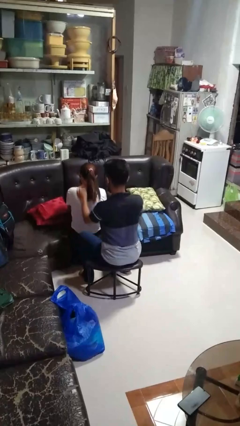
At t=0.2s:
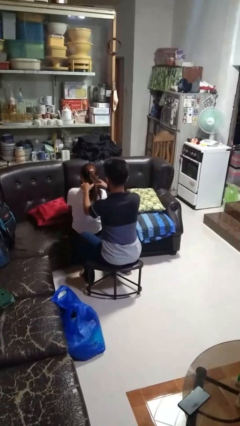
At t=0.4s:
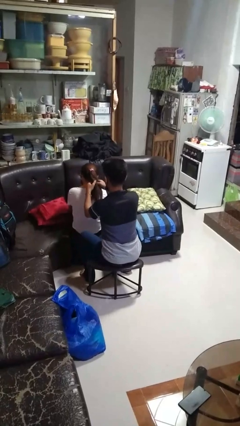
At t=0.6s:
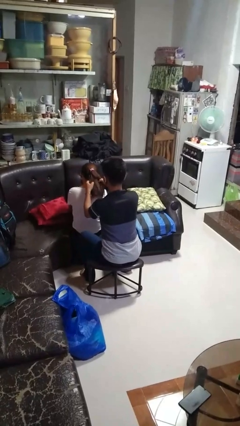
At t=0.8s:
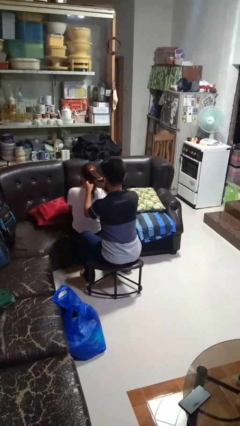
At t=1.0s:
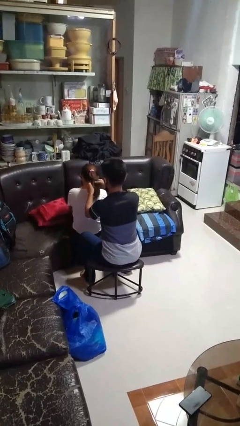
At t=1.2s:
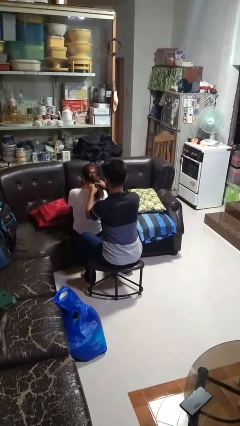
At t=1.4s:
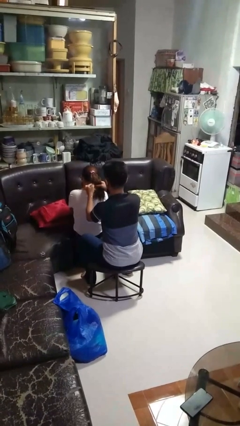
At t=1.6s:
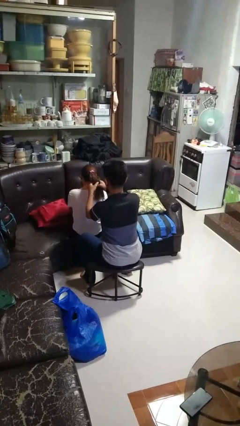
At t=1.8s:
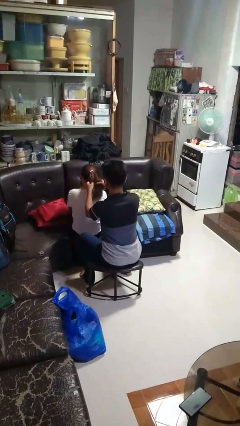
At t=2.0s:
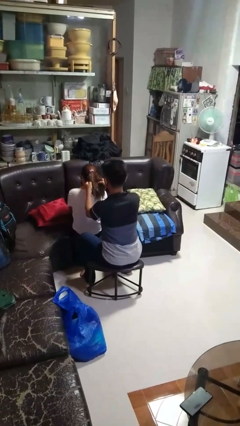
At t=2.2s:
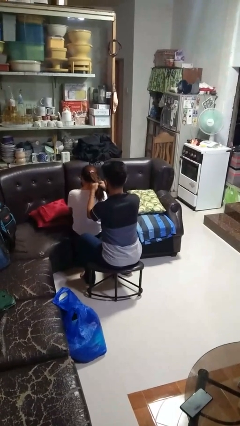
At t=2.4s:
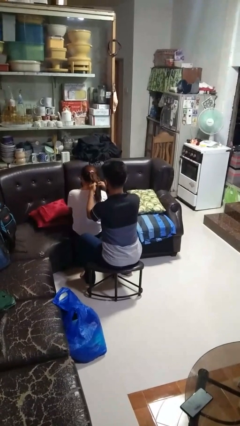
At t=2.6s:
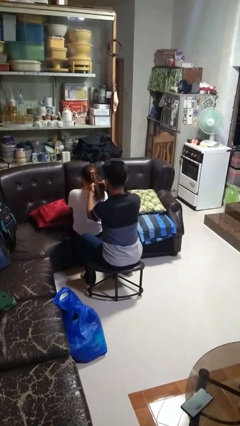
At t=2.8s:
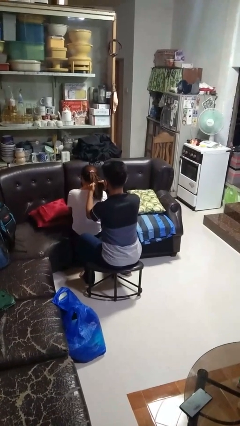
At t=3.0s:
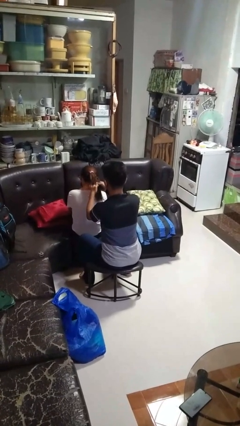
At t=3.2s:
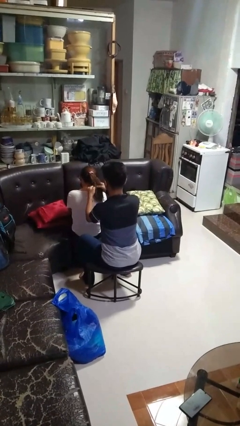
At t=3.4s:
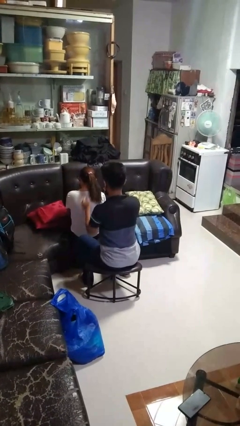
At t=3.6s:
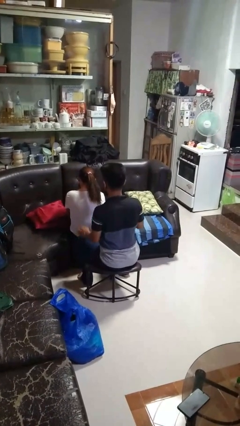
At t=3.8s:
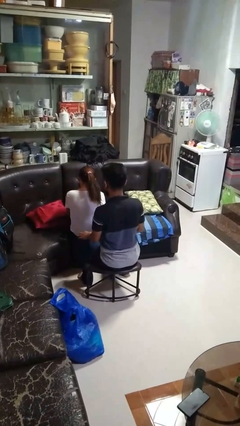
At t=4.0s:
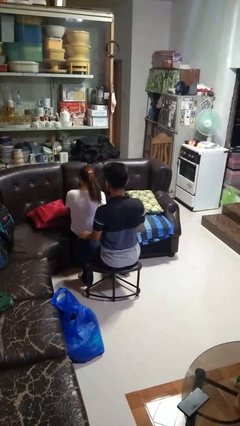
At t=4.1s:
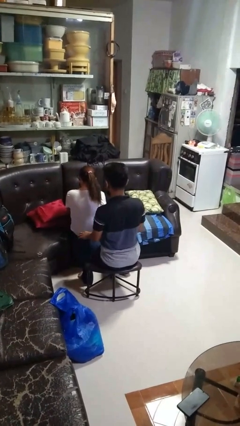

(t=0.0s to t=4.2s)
person braids hair of person

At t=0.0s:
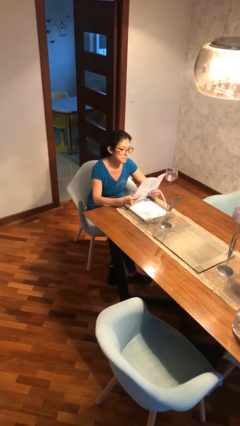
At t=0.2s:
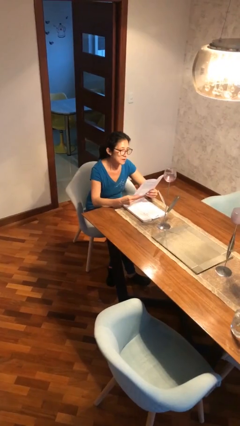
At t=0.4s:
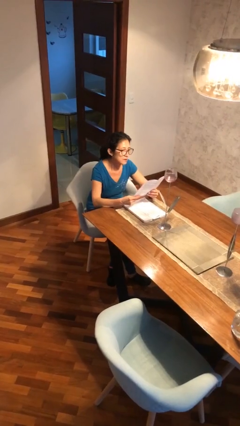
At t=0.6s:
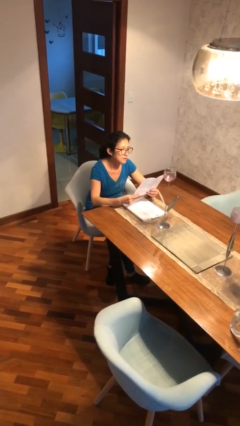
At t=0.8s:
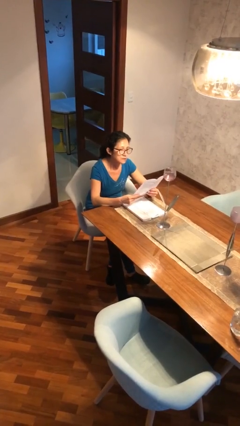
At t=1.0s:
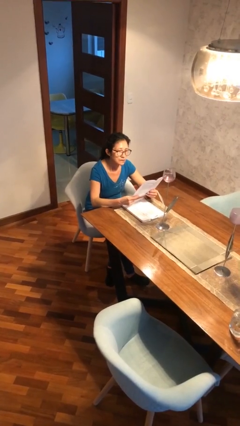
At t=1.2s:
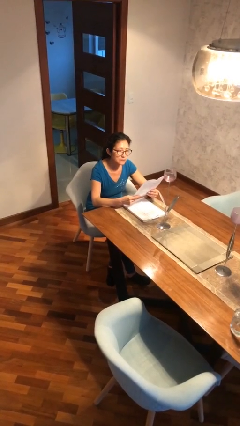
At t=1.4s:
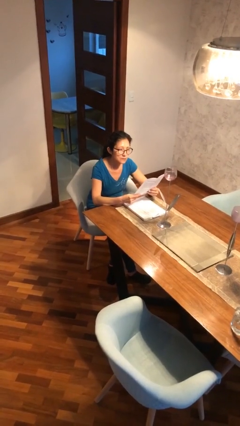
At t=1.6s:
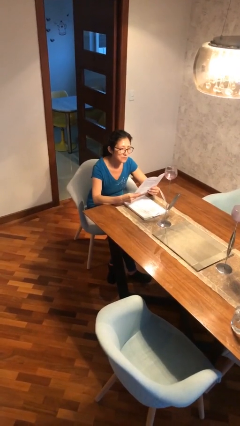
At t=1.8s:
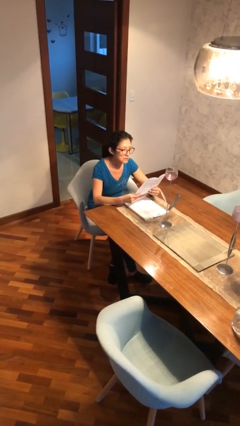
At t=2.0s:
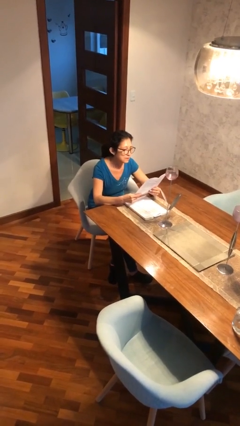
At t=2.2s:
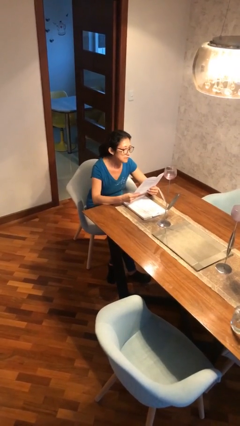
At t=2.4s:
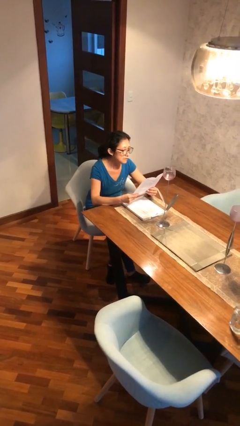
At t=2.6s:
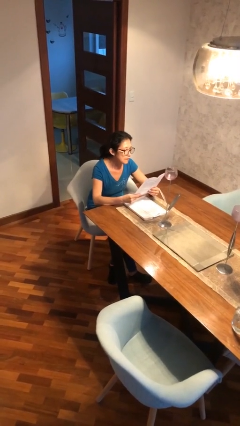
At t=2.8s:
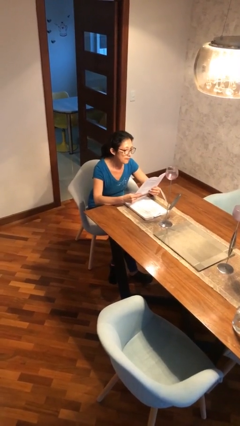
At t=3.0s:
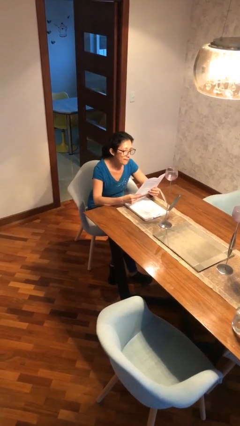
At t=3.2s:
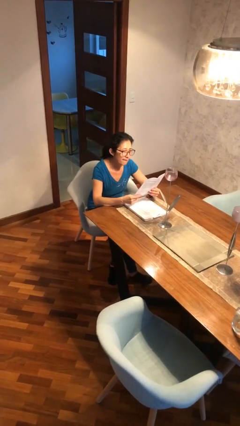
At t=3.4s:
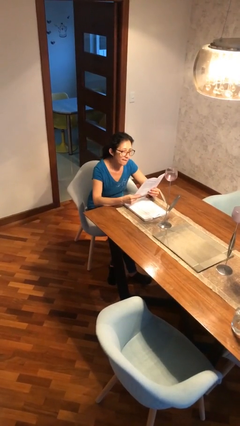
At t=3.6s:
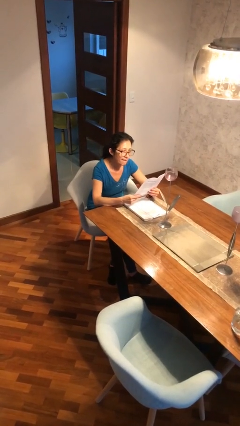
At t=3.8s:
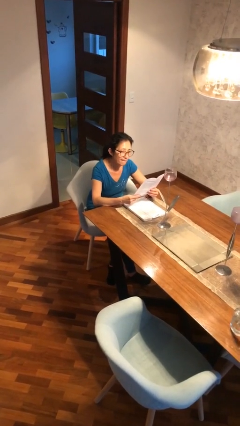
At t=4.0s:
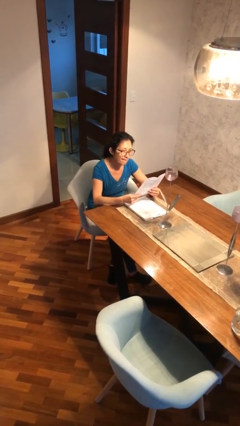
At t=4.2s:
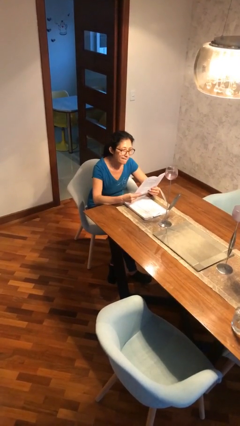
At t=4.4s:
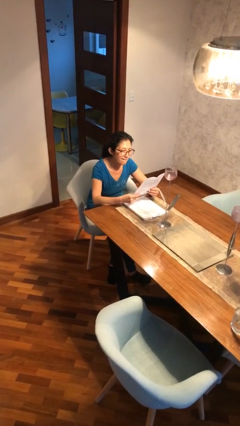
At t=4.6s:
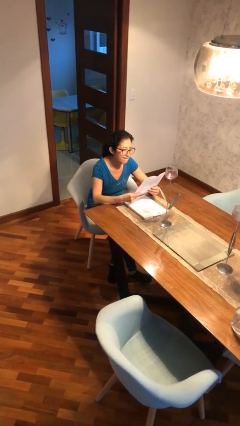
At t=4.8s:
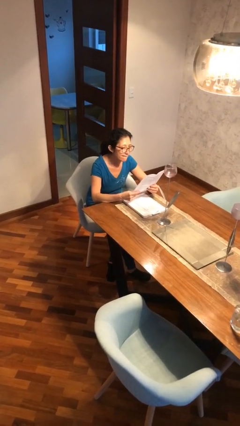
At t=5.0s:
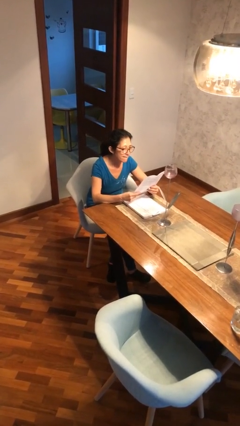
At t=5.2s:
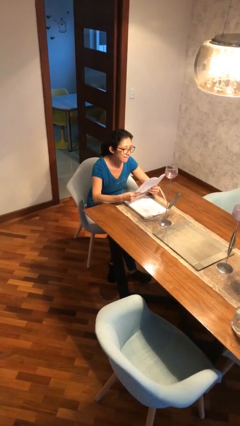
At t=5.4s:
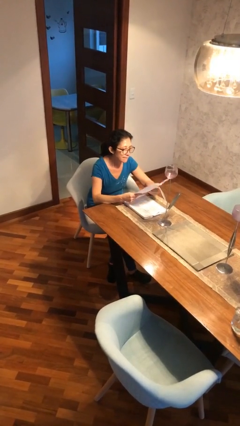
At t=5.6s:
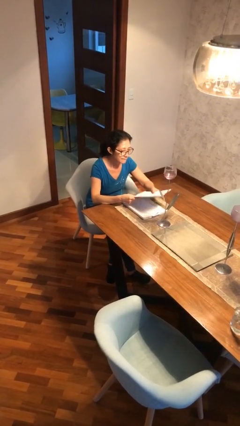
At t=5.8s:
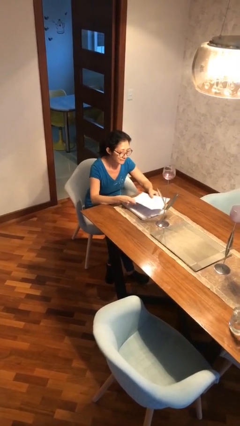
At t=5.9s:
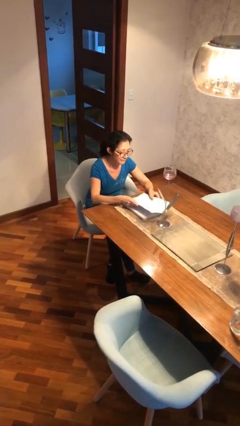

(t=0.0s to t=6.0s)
person reads document

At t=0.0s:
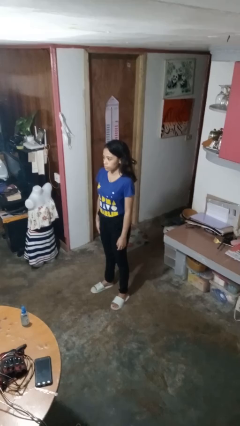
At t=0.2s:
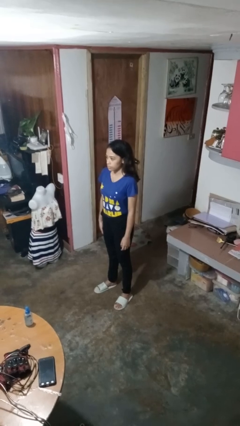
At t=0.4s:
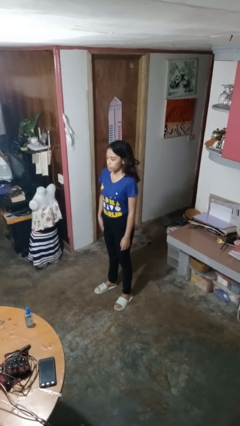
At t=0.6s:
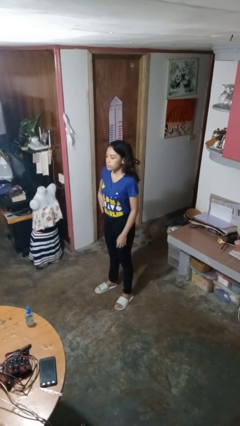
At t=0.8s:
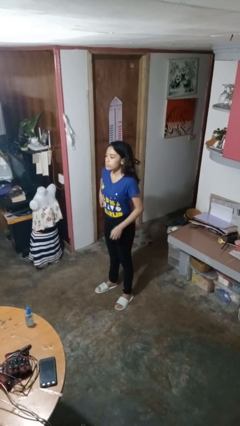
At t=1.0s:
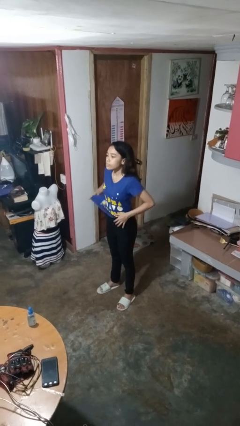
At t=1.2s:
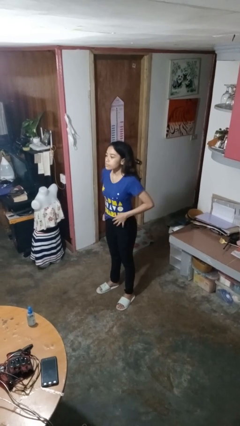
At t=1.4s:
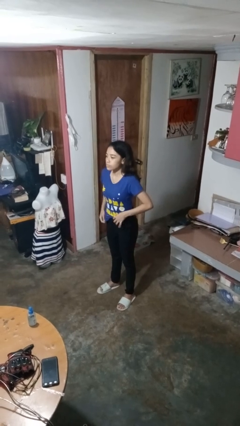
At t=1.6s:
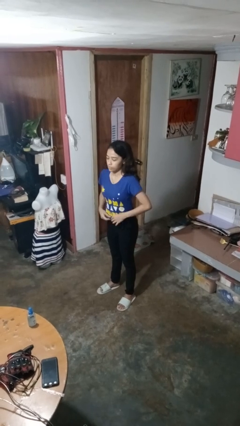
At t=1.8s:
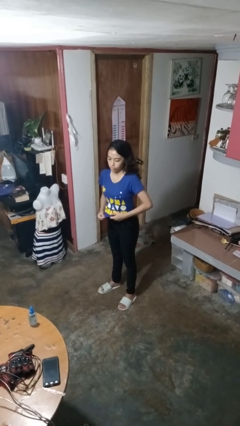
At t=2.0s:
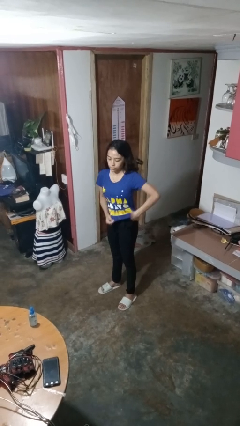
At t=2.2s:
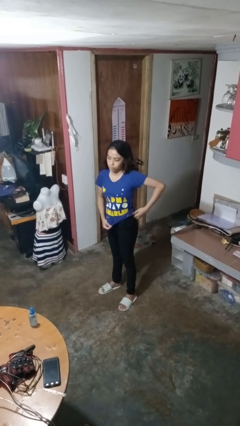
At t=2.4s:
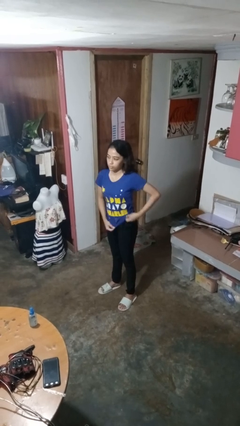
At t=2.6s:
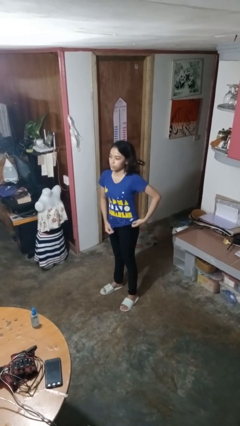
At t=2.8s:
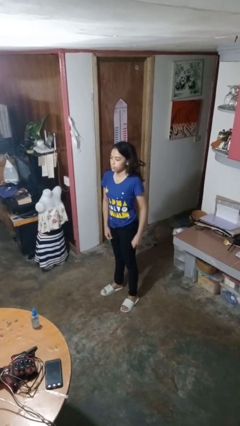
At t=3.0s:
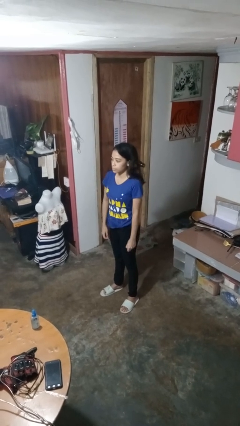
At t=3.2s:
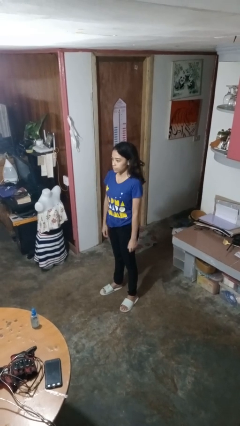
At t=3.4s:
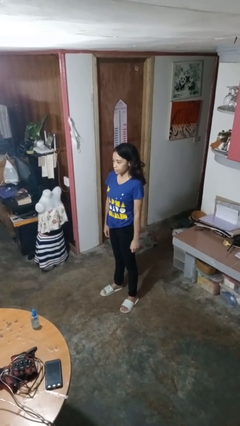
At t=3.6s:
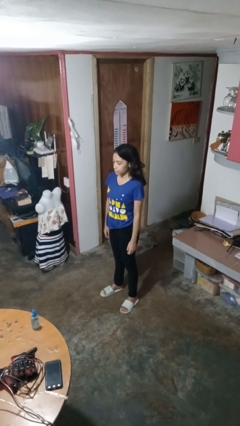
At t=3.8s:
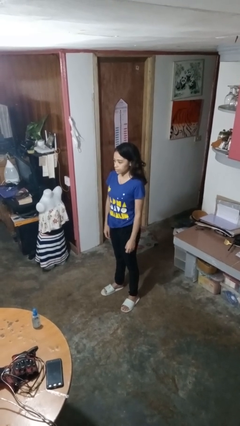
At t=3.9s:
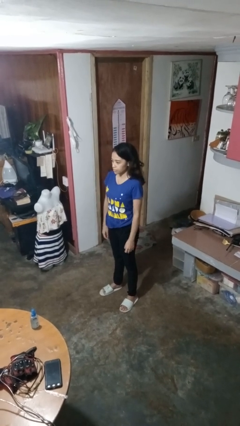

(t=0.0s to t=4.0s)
person untucks shirt

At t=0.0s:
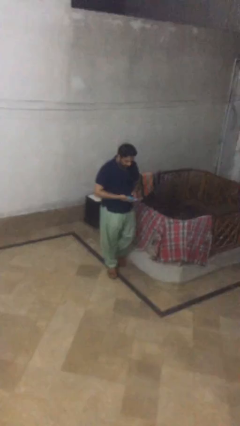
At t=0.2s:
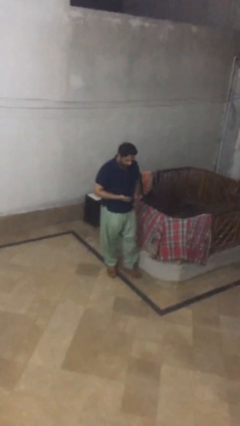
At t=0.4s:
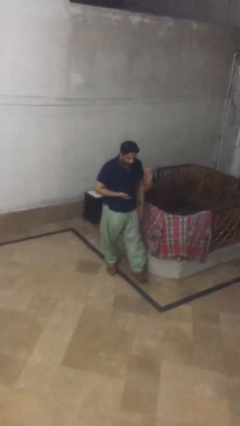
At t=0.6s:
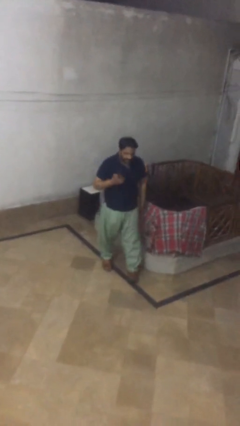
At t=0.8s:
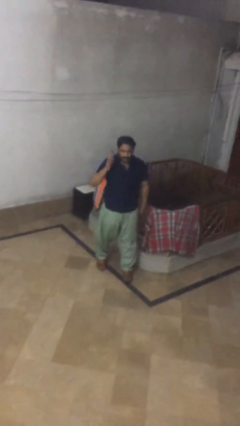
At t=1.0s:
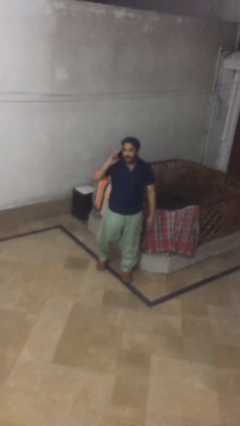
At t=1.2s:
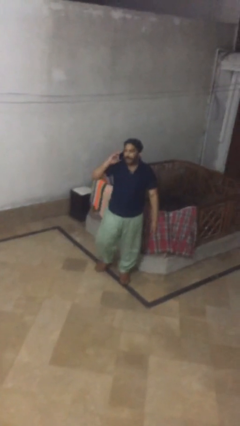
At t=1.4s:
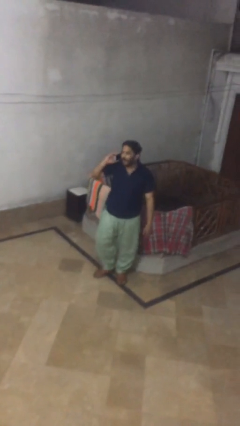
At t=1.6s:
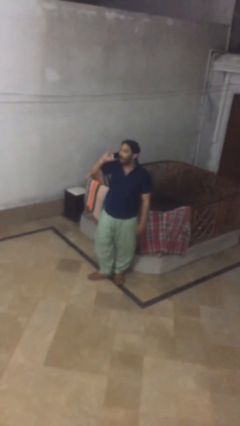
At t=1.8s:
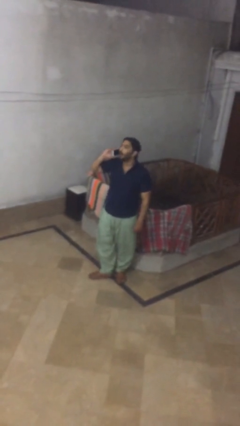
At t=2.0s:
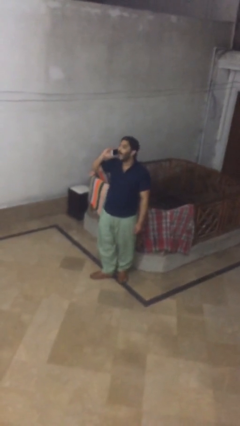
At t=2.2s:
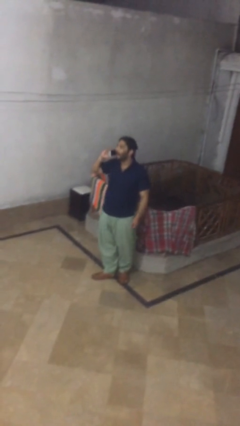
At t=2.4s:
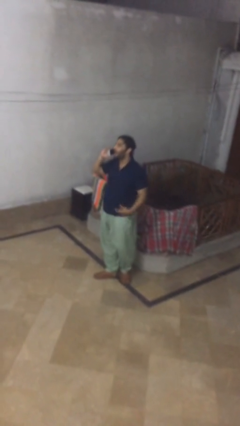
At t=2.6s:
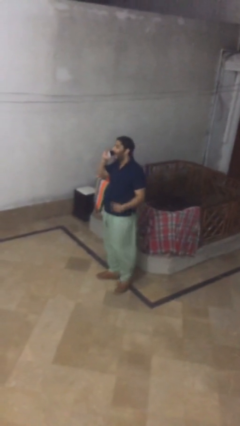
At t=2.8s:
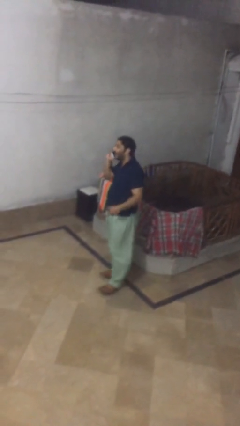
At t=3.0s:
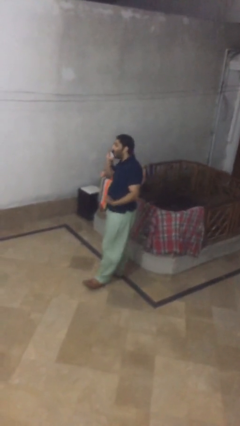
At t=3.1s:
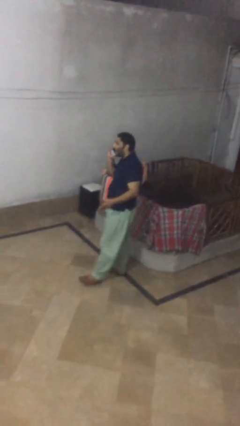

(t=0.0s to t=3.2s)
person talks on phone

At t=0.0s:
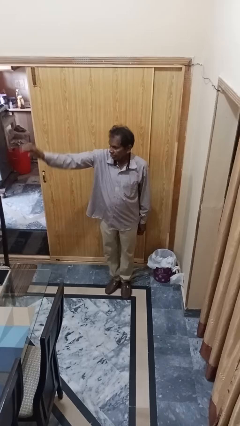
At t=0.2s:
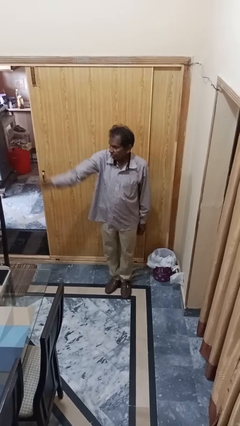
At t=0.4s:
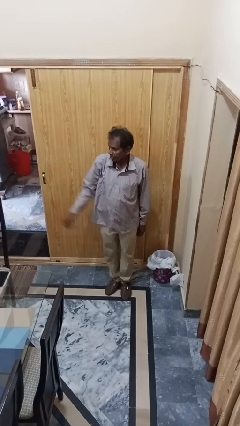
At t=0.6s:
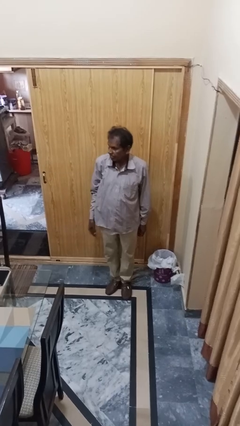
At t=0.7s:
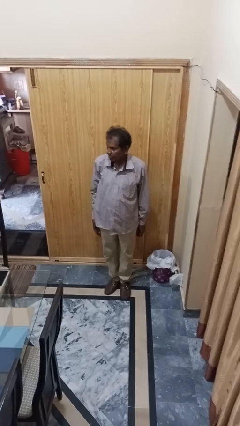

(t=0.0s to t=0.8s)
person gestures lower hand
